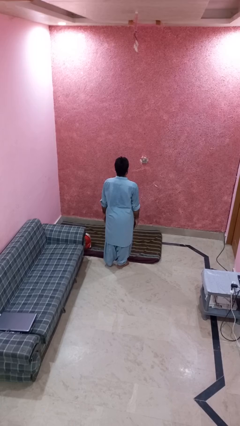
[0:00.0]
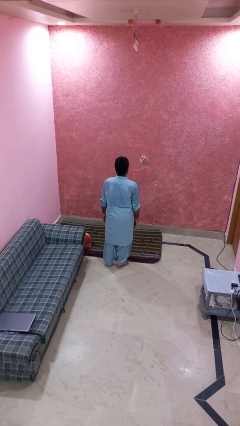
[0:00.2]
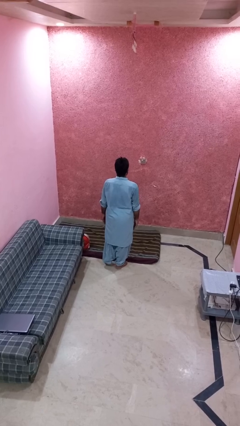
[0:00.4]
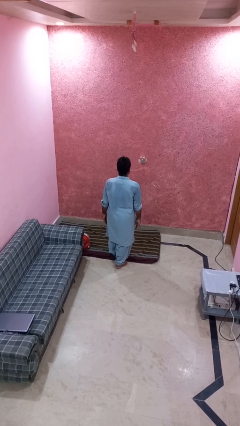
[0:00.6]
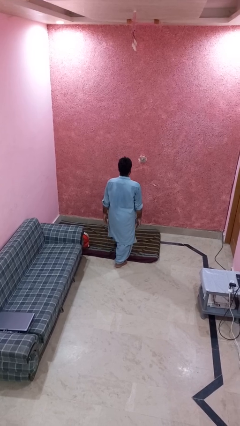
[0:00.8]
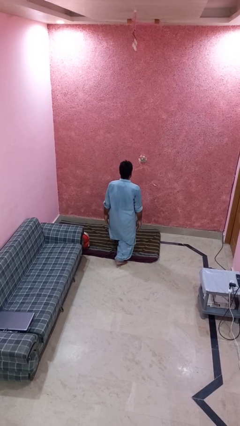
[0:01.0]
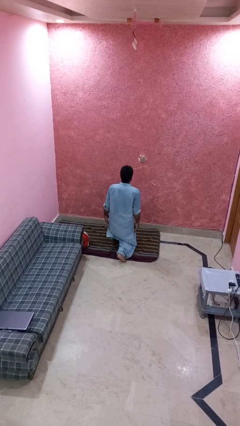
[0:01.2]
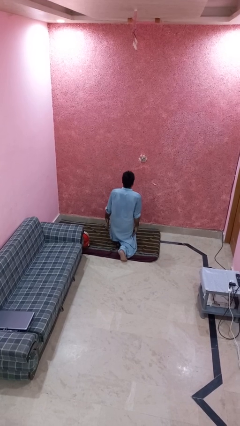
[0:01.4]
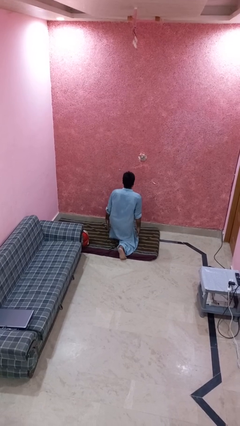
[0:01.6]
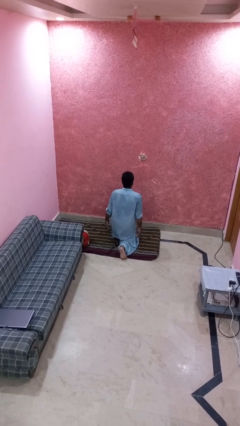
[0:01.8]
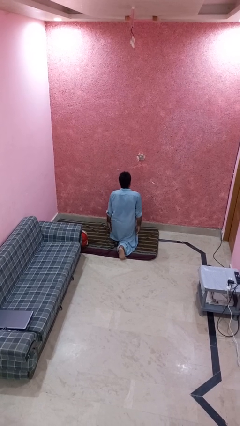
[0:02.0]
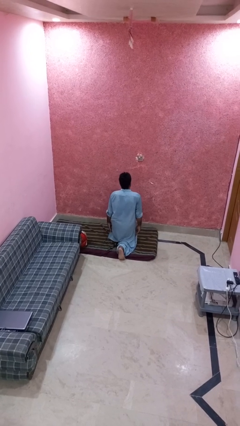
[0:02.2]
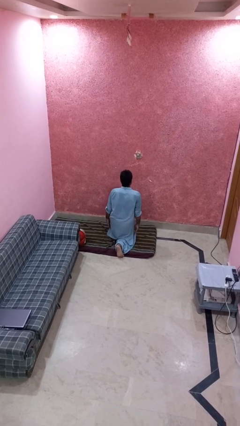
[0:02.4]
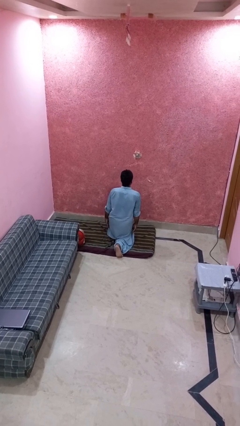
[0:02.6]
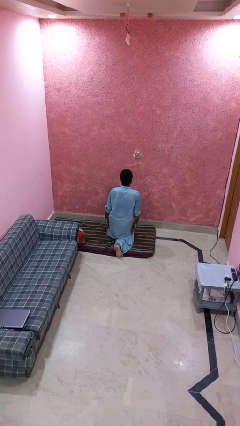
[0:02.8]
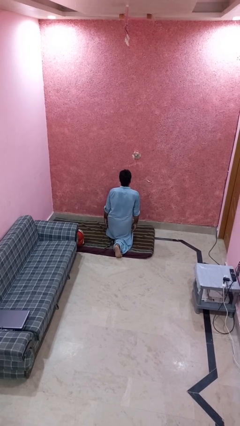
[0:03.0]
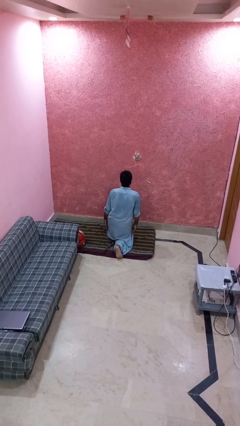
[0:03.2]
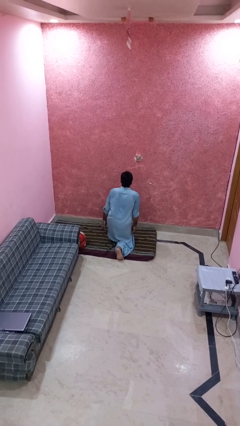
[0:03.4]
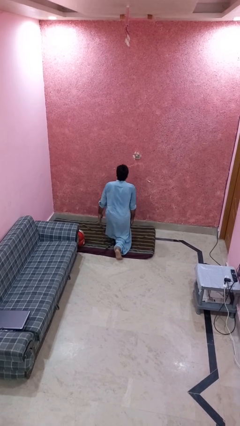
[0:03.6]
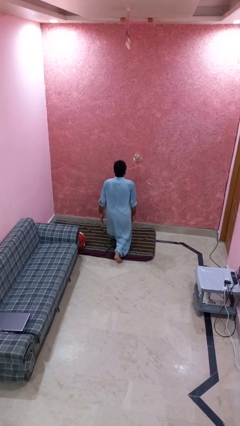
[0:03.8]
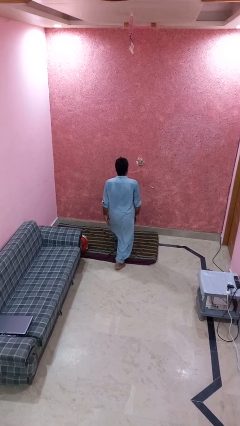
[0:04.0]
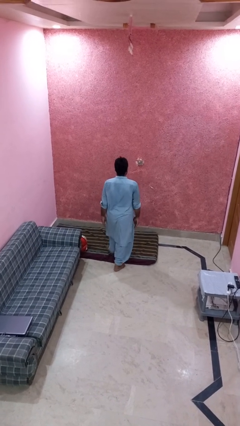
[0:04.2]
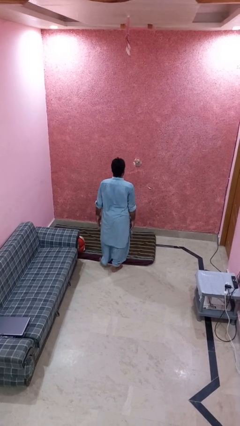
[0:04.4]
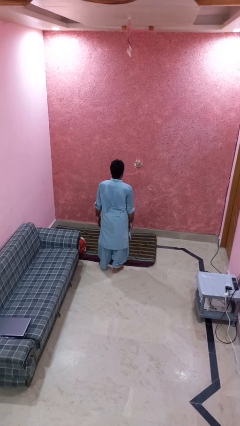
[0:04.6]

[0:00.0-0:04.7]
person exercises with lunges

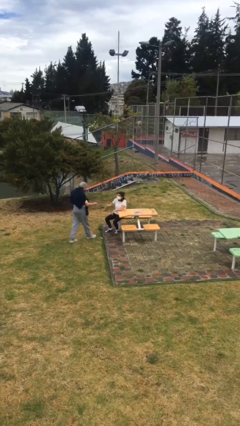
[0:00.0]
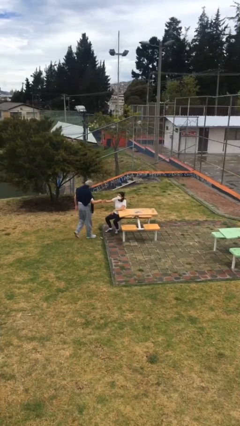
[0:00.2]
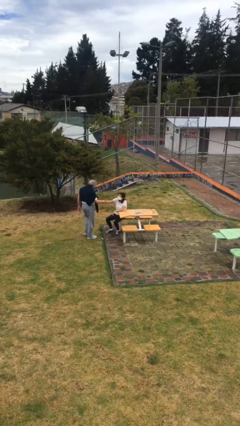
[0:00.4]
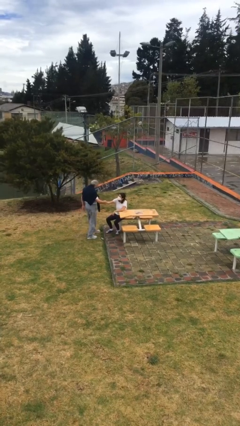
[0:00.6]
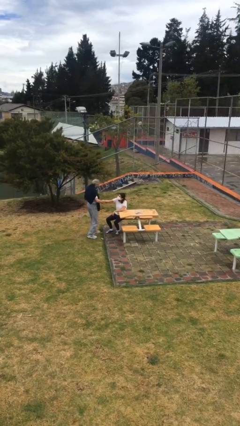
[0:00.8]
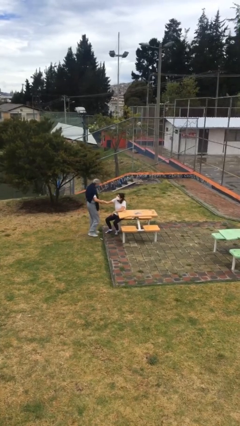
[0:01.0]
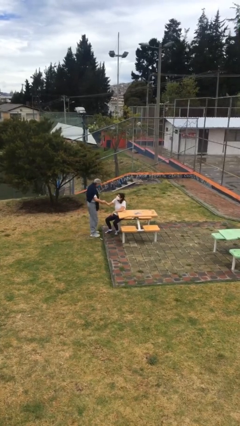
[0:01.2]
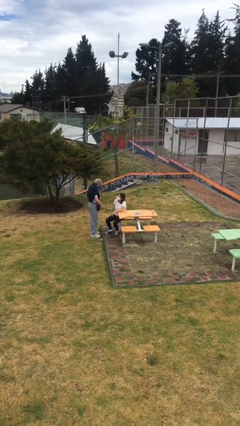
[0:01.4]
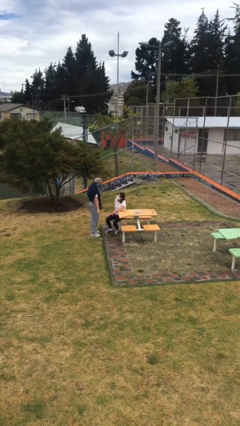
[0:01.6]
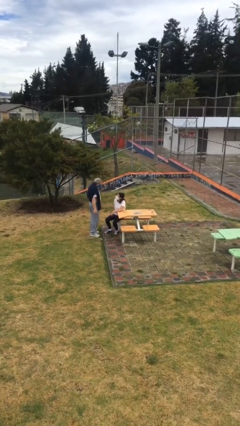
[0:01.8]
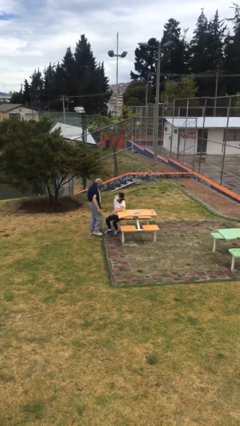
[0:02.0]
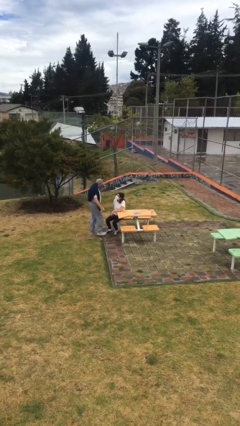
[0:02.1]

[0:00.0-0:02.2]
person shakes hand

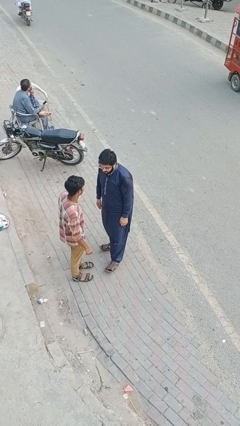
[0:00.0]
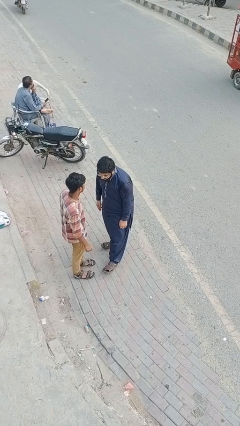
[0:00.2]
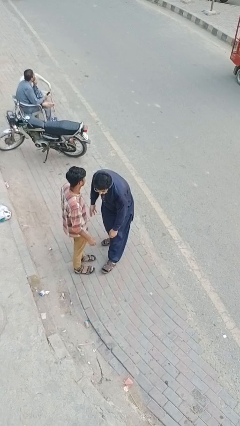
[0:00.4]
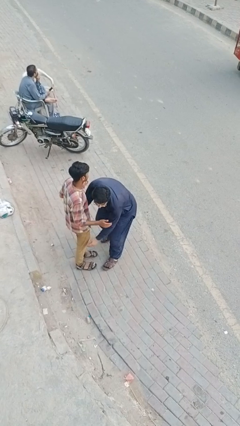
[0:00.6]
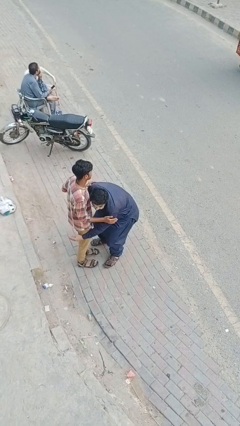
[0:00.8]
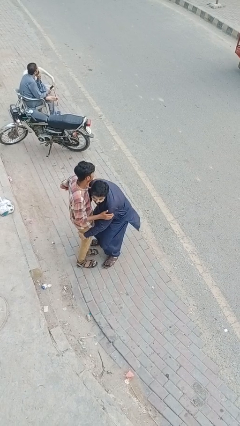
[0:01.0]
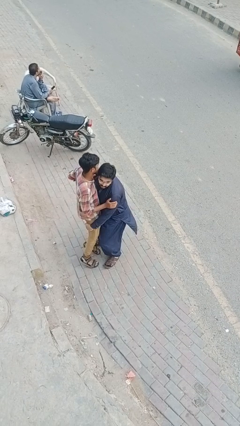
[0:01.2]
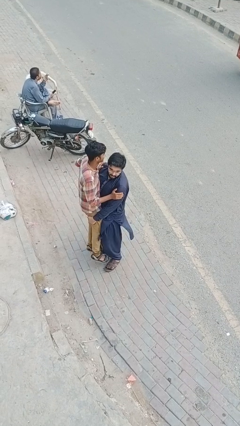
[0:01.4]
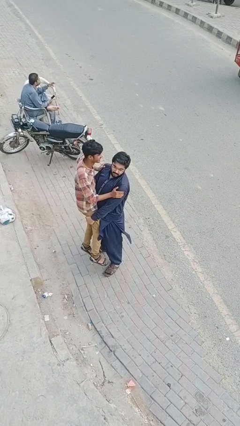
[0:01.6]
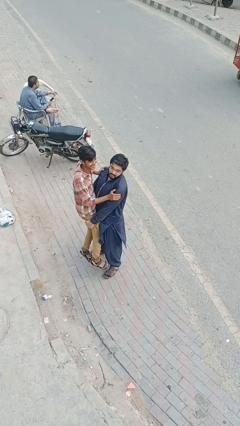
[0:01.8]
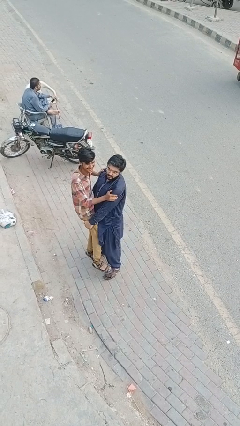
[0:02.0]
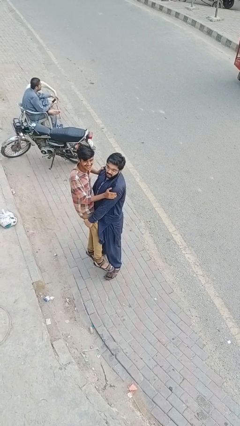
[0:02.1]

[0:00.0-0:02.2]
person picks up person

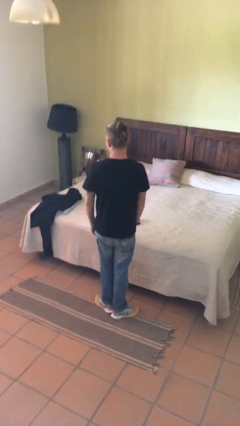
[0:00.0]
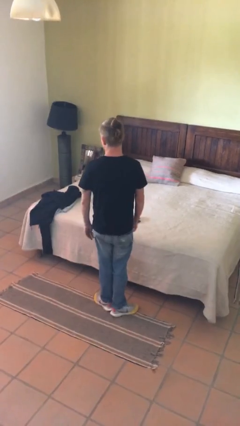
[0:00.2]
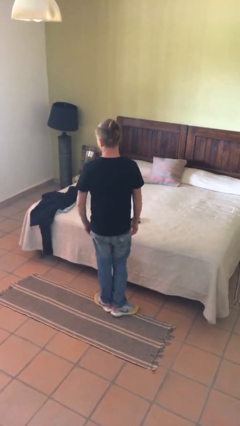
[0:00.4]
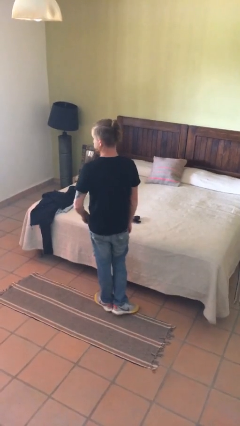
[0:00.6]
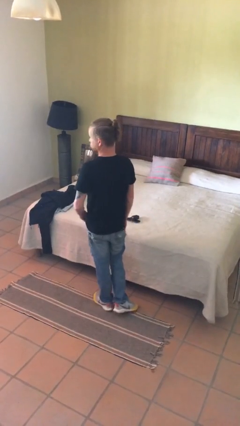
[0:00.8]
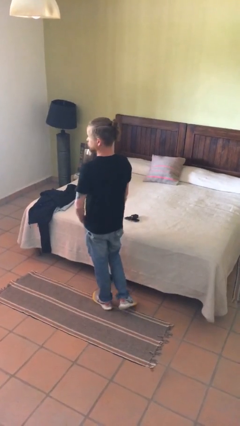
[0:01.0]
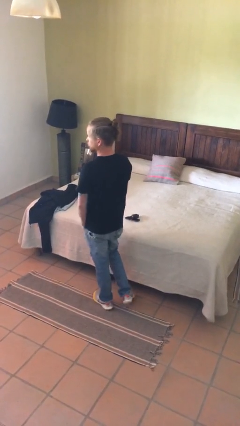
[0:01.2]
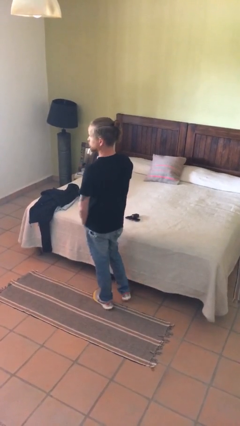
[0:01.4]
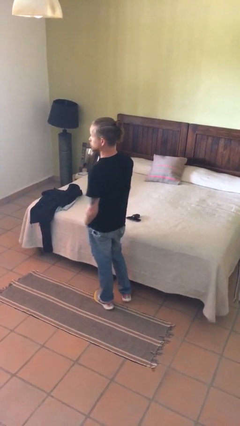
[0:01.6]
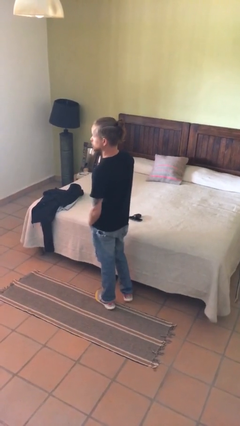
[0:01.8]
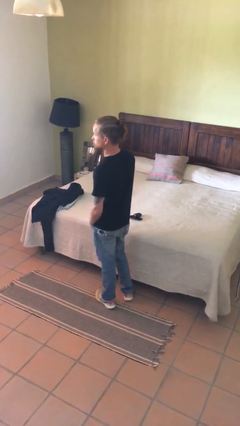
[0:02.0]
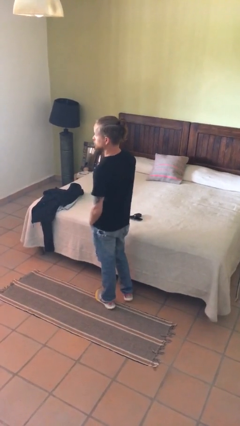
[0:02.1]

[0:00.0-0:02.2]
person puts hands in back pockets

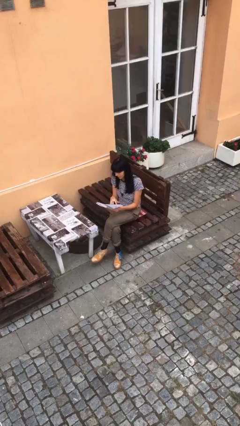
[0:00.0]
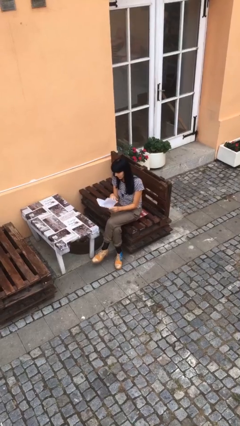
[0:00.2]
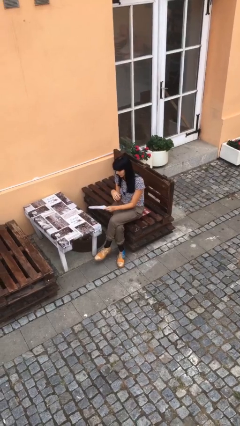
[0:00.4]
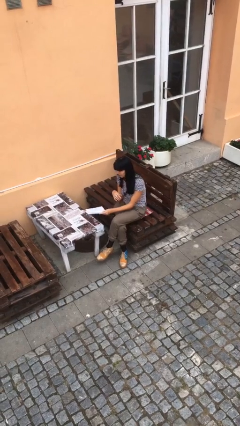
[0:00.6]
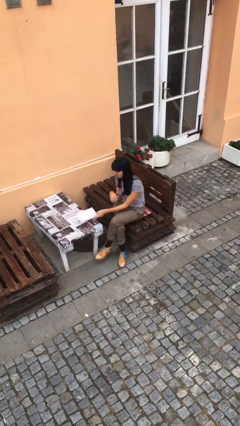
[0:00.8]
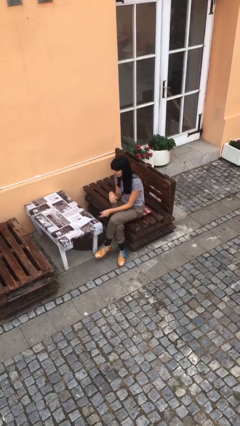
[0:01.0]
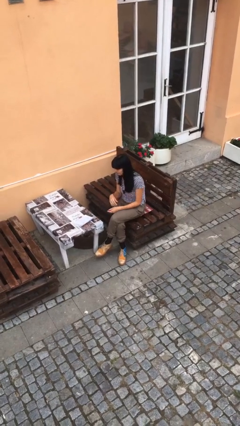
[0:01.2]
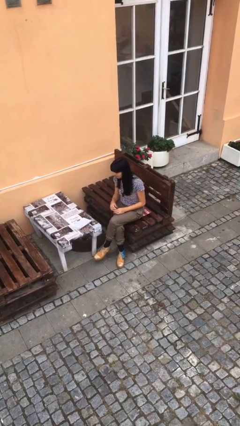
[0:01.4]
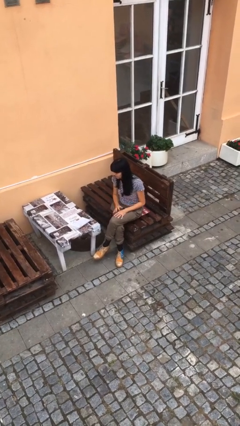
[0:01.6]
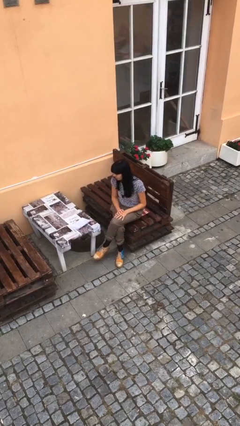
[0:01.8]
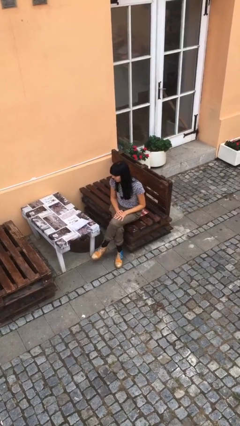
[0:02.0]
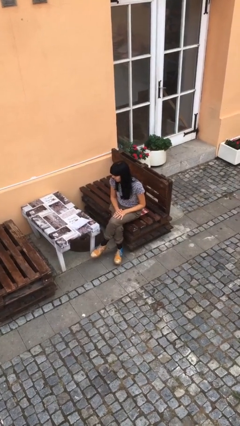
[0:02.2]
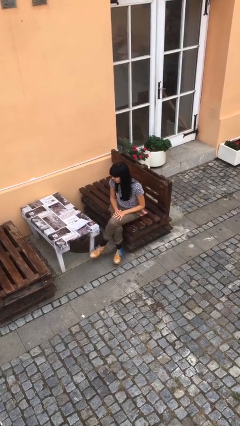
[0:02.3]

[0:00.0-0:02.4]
person puts down object on table

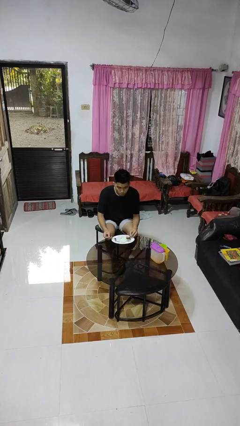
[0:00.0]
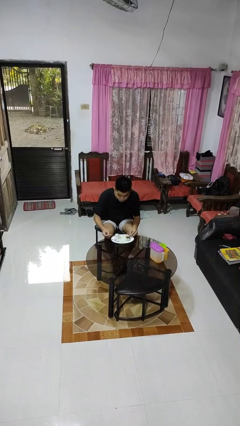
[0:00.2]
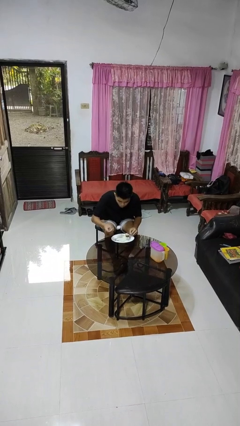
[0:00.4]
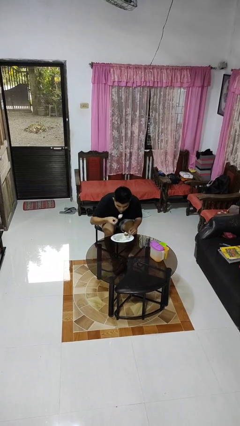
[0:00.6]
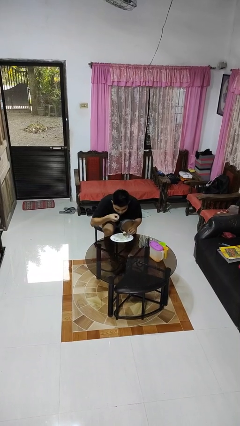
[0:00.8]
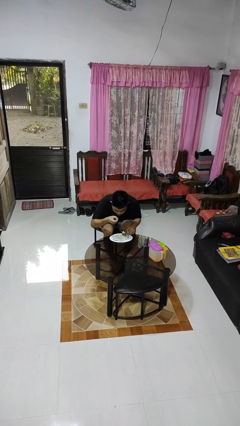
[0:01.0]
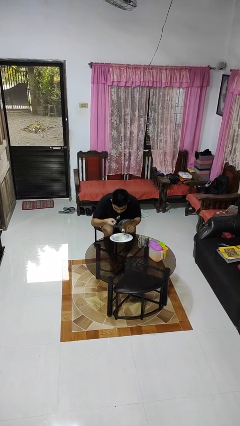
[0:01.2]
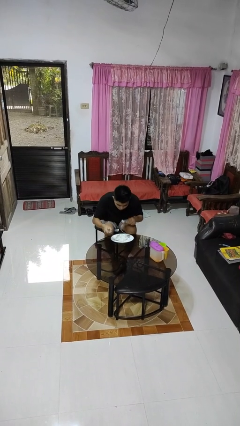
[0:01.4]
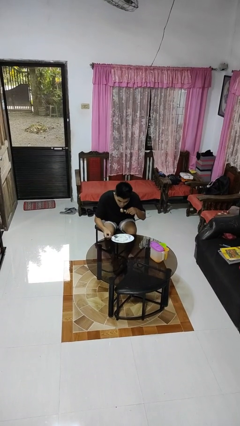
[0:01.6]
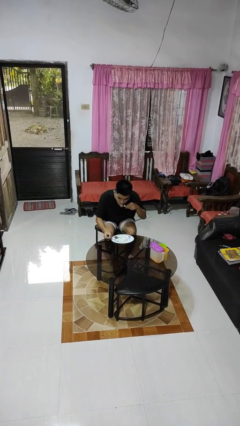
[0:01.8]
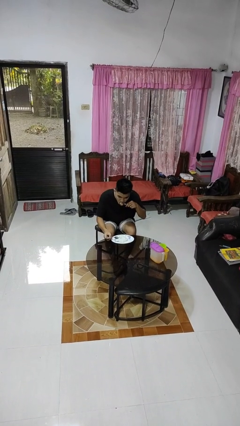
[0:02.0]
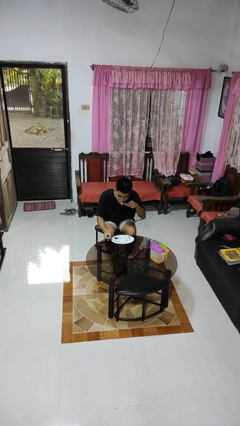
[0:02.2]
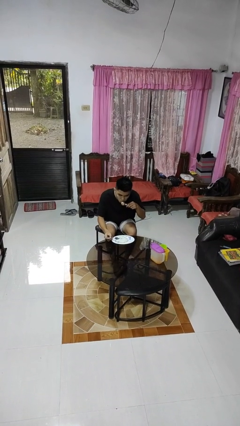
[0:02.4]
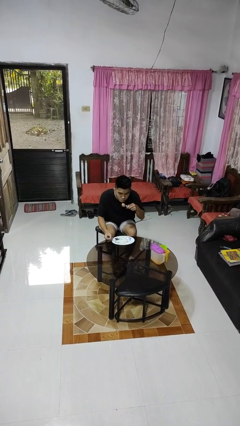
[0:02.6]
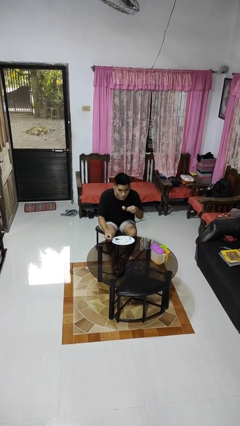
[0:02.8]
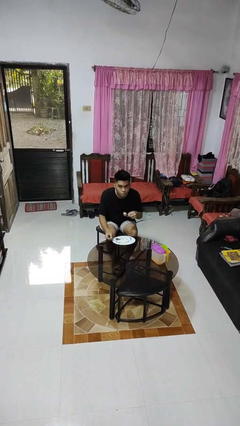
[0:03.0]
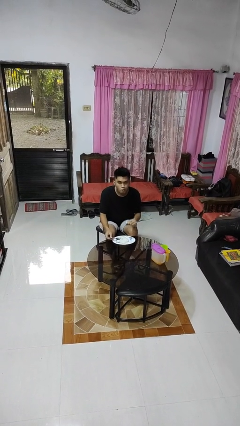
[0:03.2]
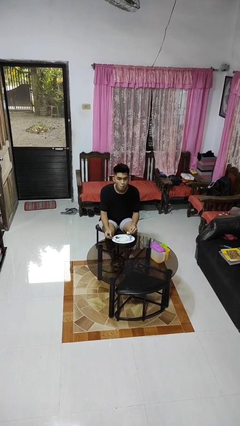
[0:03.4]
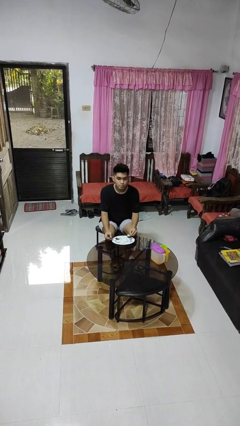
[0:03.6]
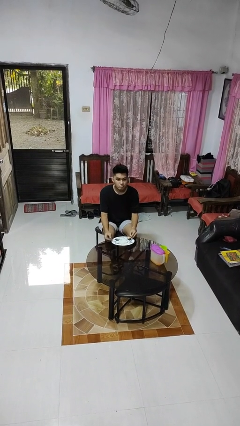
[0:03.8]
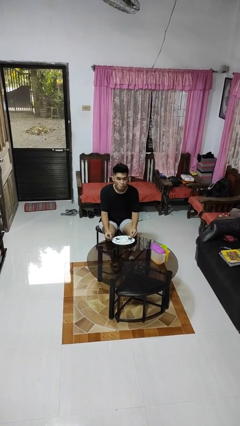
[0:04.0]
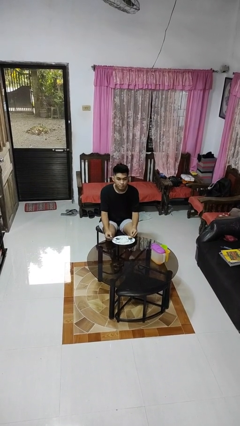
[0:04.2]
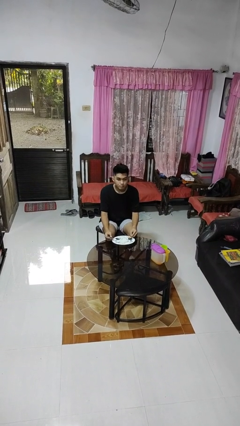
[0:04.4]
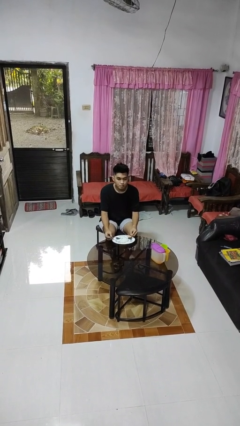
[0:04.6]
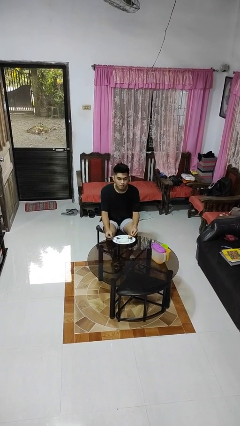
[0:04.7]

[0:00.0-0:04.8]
person eats with utensil
